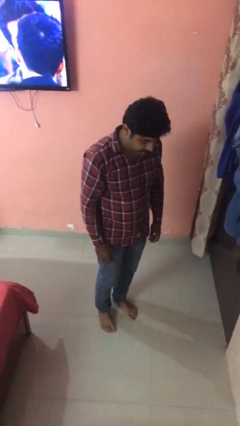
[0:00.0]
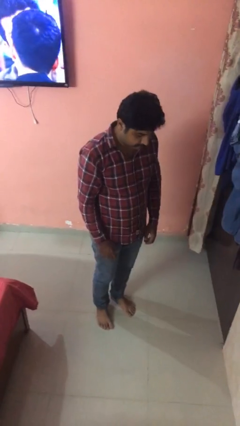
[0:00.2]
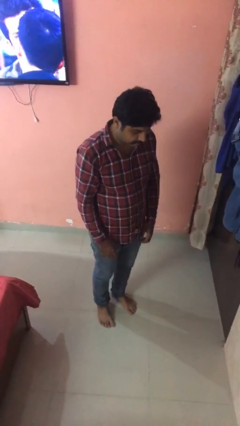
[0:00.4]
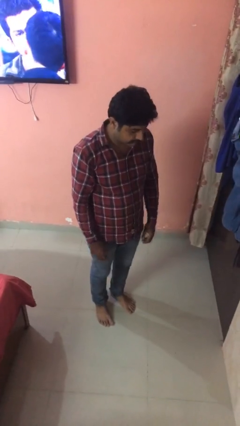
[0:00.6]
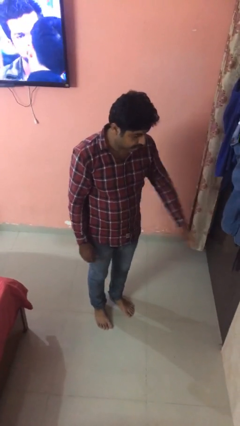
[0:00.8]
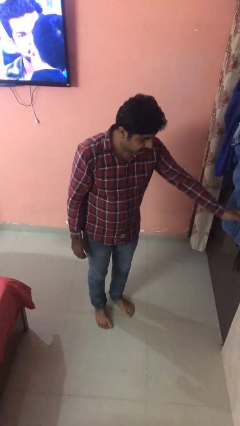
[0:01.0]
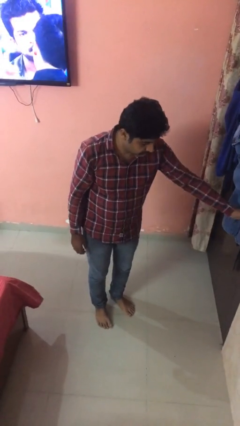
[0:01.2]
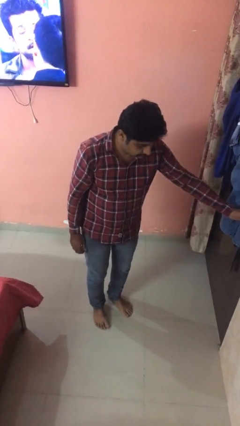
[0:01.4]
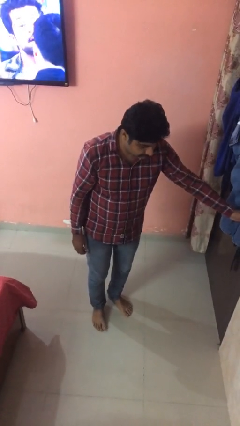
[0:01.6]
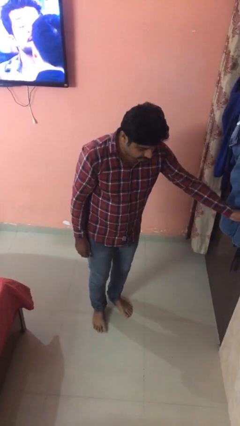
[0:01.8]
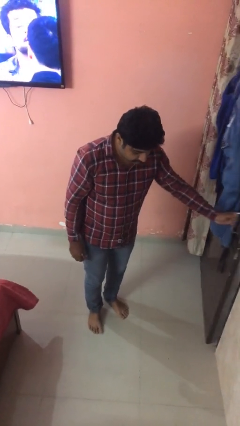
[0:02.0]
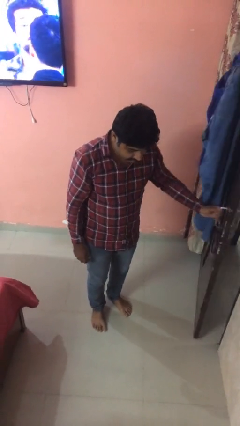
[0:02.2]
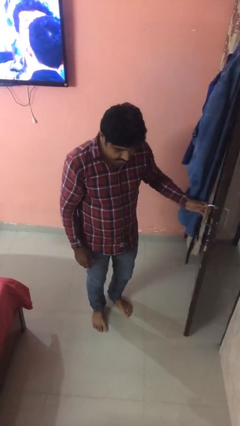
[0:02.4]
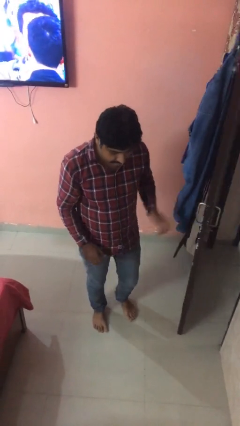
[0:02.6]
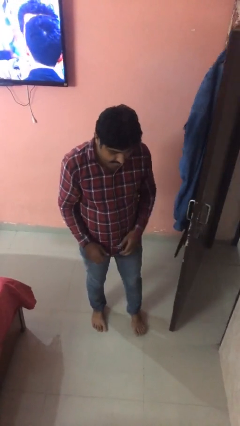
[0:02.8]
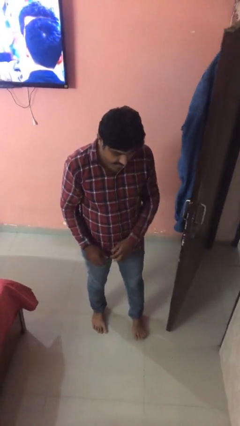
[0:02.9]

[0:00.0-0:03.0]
person opens facility door

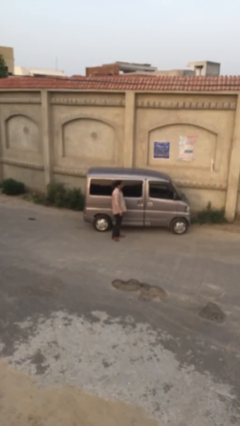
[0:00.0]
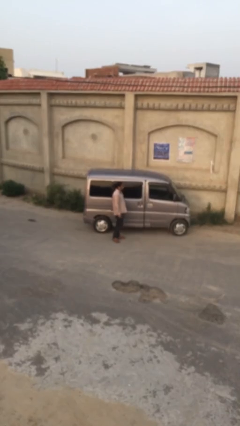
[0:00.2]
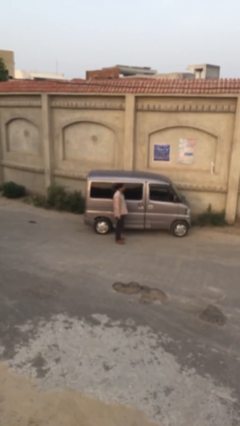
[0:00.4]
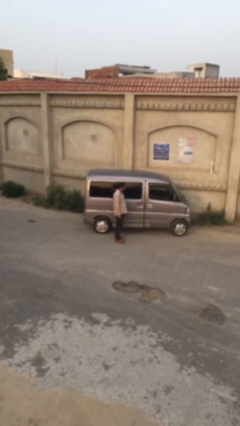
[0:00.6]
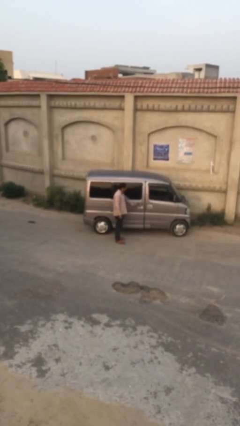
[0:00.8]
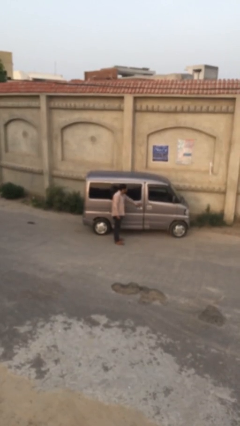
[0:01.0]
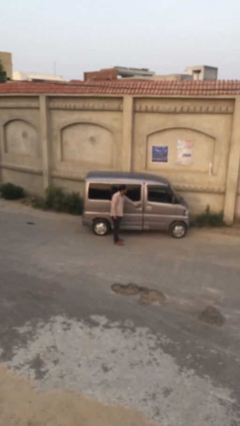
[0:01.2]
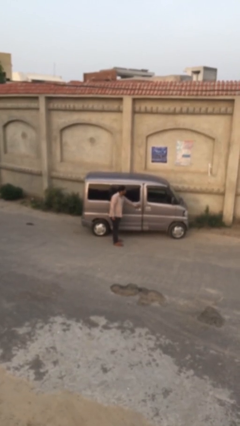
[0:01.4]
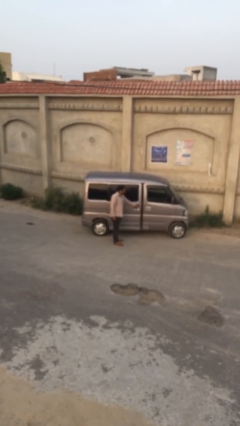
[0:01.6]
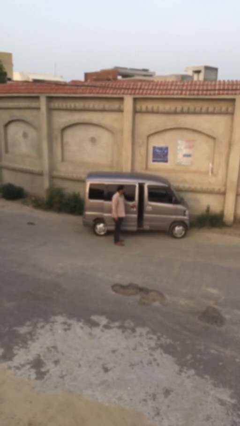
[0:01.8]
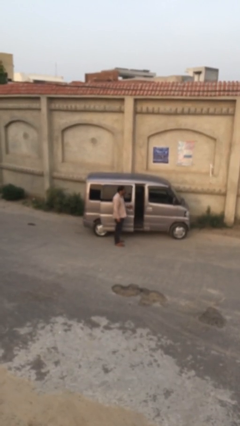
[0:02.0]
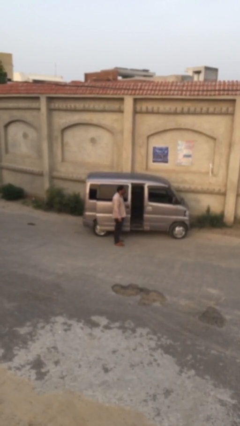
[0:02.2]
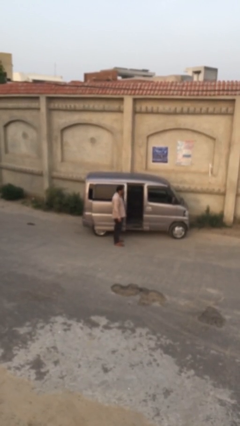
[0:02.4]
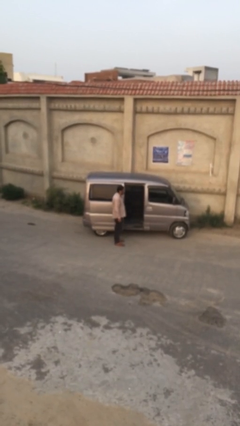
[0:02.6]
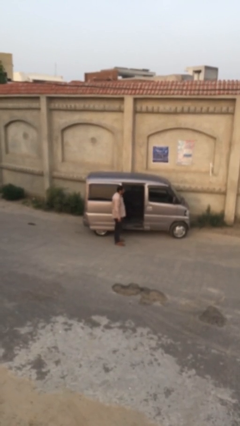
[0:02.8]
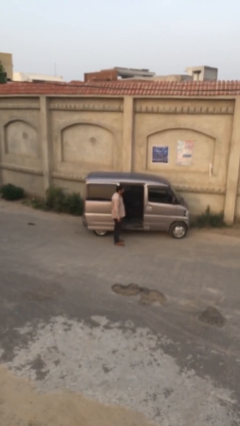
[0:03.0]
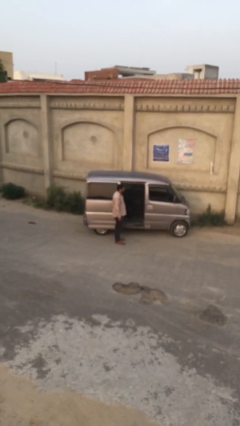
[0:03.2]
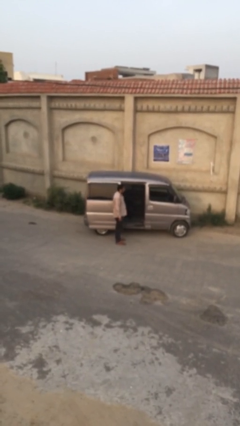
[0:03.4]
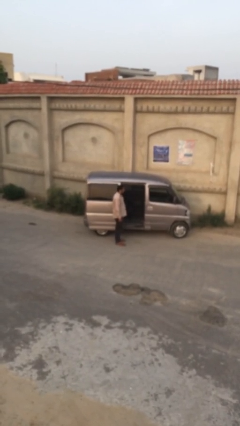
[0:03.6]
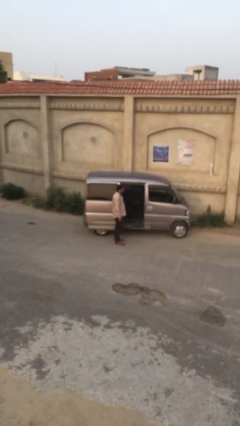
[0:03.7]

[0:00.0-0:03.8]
person opens car door

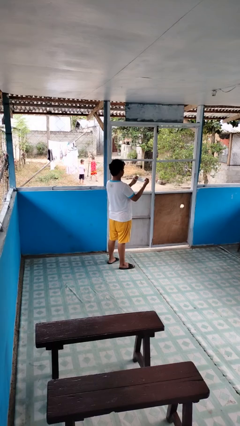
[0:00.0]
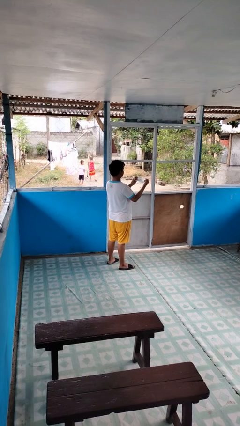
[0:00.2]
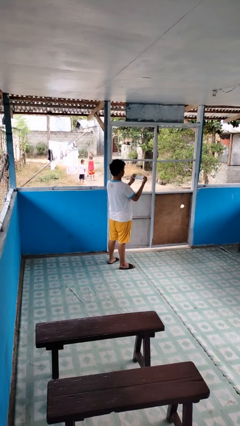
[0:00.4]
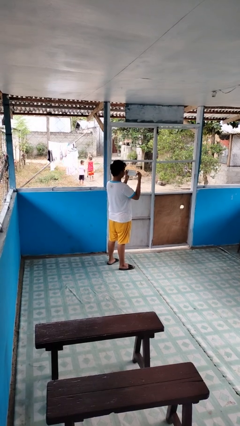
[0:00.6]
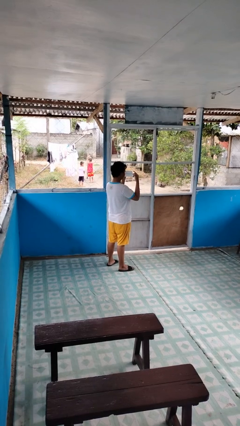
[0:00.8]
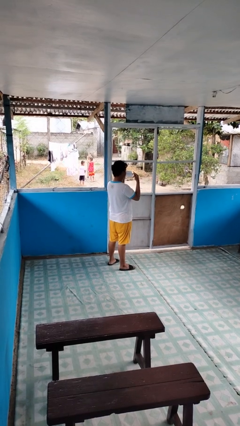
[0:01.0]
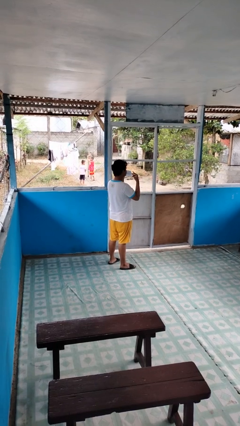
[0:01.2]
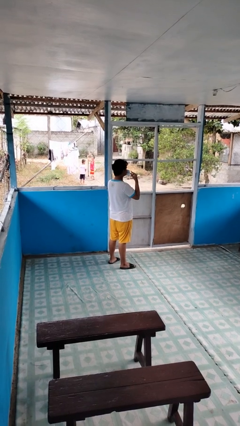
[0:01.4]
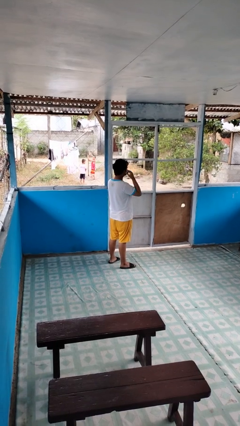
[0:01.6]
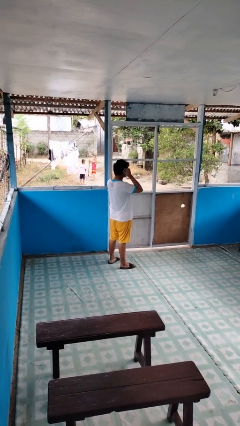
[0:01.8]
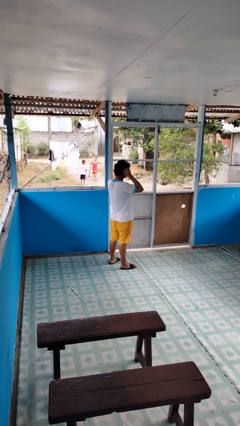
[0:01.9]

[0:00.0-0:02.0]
person puts on facemask

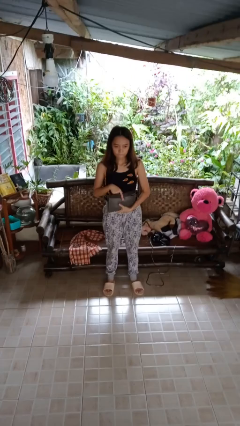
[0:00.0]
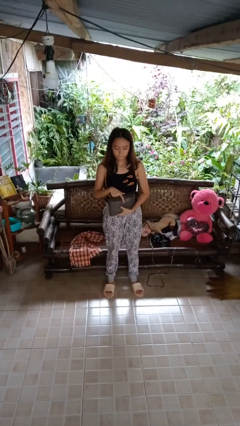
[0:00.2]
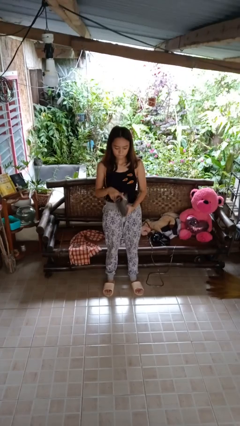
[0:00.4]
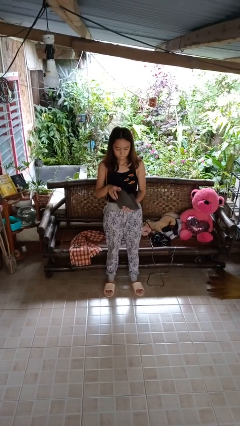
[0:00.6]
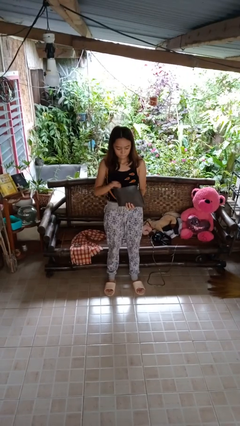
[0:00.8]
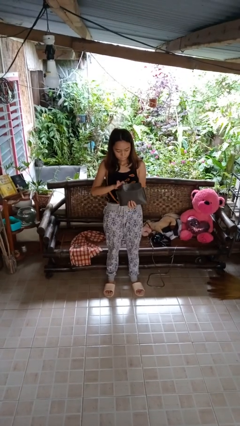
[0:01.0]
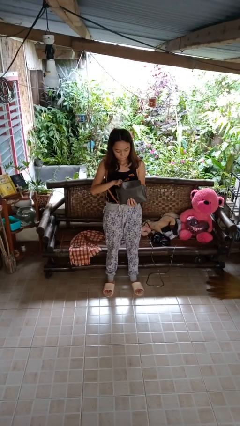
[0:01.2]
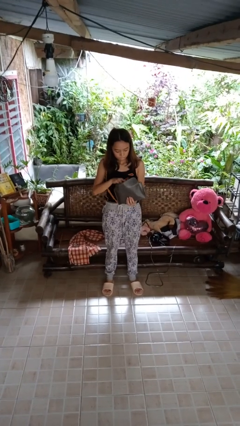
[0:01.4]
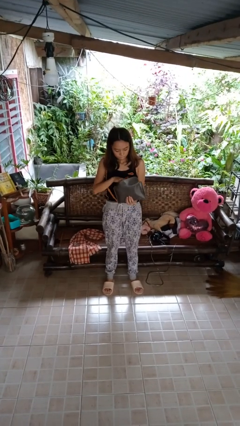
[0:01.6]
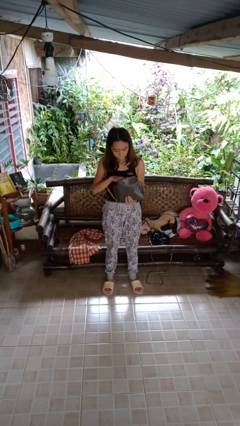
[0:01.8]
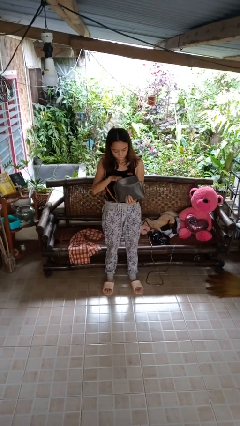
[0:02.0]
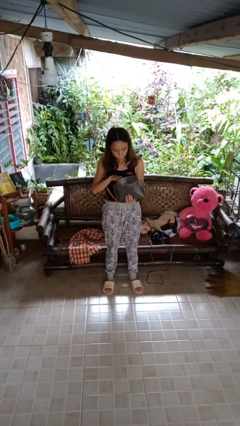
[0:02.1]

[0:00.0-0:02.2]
person searches in purse

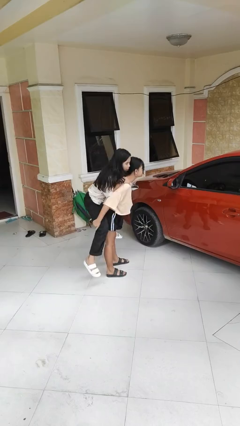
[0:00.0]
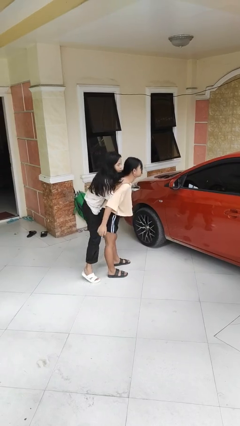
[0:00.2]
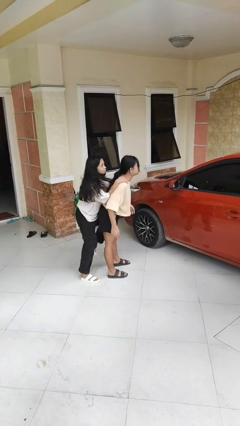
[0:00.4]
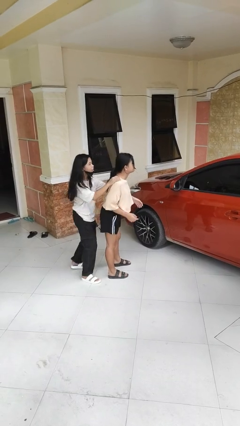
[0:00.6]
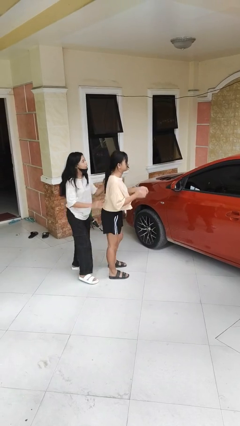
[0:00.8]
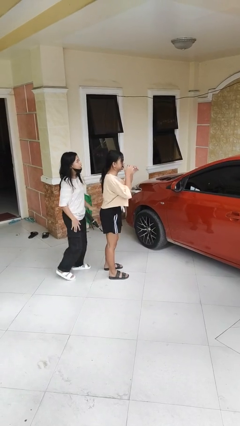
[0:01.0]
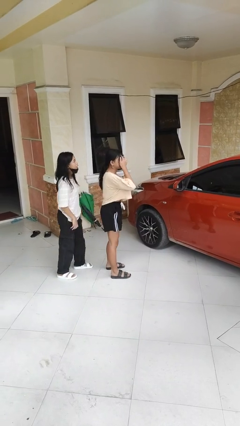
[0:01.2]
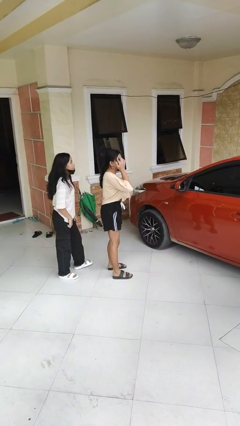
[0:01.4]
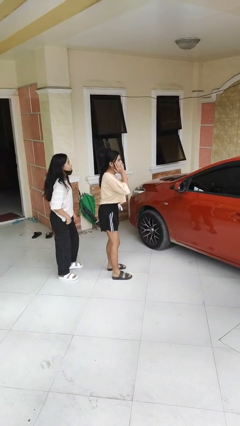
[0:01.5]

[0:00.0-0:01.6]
person puts down person

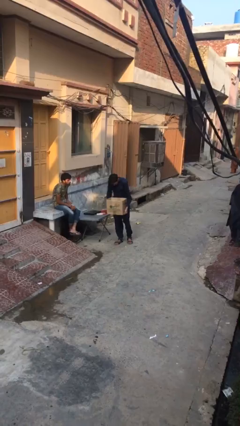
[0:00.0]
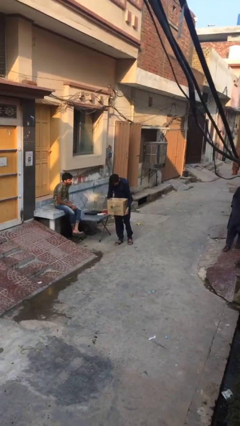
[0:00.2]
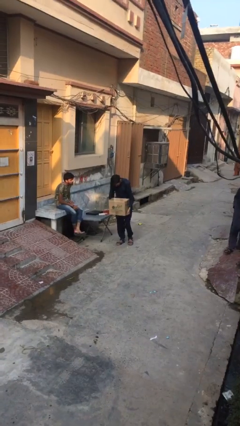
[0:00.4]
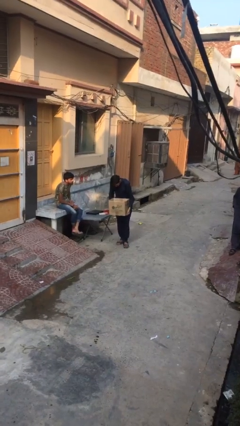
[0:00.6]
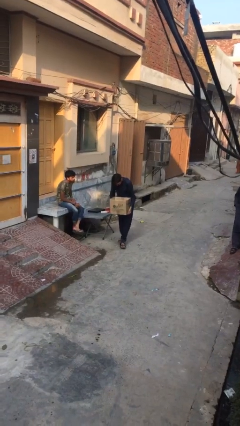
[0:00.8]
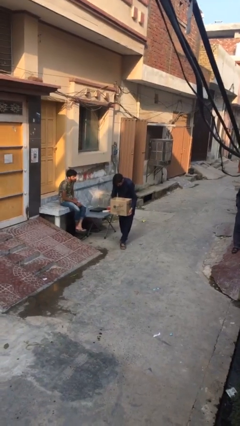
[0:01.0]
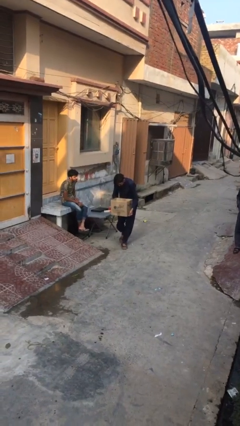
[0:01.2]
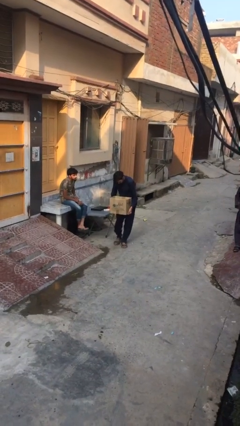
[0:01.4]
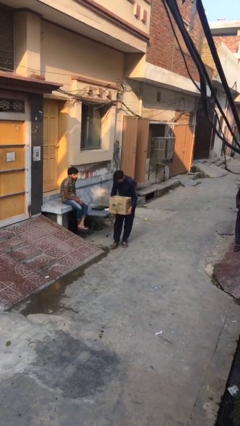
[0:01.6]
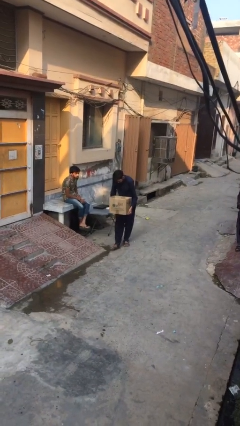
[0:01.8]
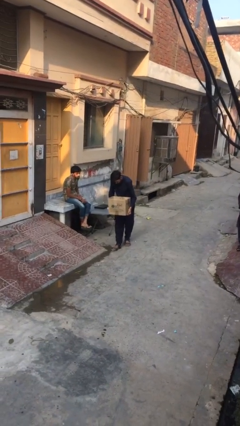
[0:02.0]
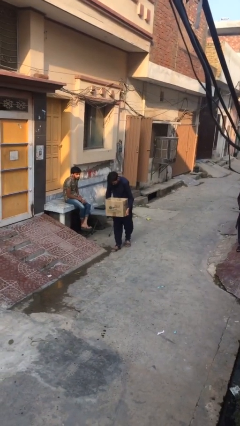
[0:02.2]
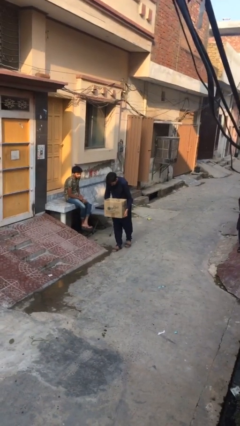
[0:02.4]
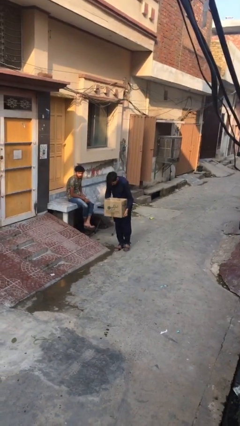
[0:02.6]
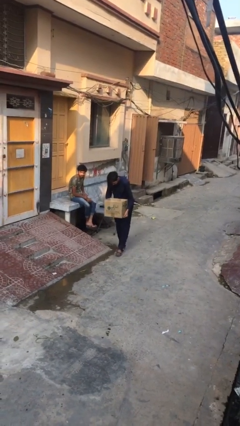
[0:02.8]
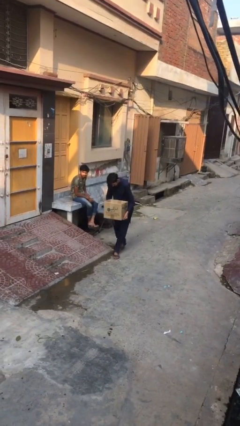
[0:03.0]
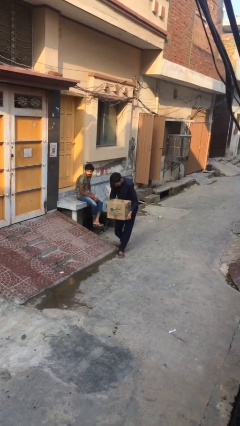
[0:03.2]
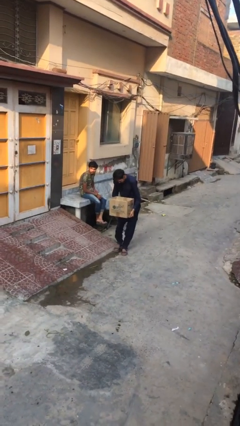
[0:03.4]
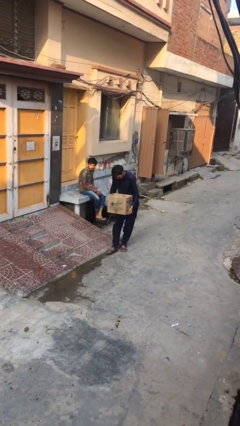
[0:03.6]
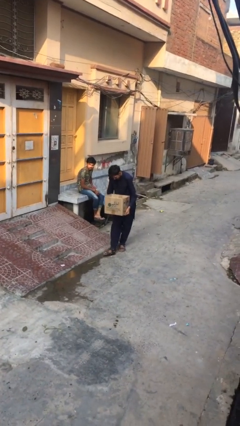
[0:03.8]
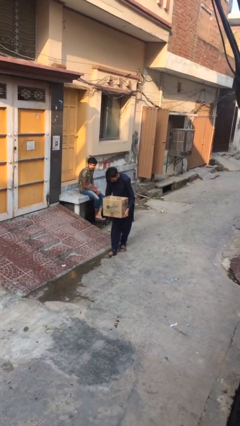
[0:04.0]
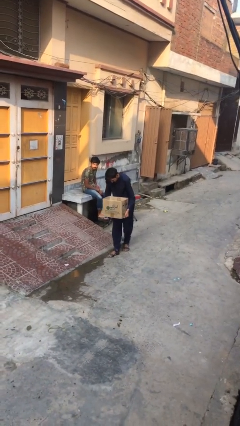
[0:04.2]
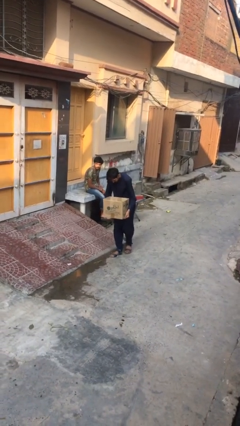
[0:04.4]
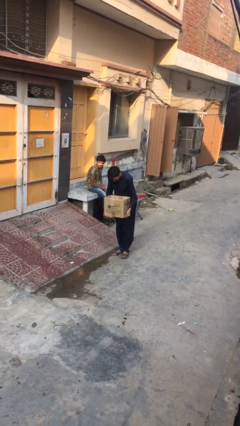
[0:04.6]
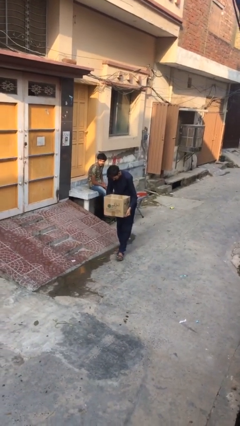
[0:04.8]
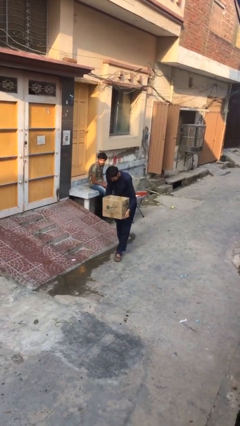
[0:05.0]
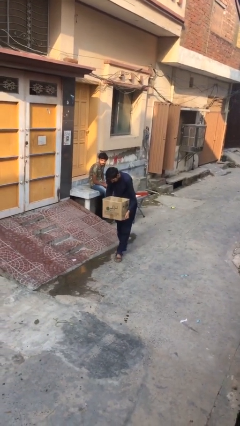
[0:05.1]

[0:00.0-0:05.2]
person carries heavy object
